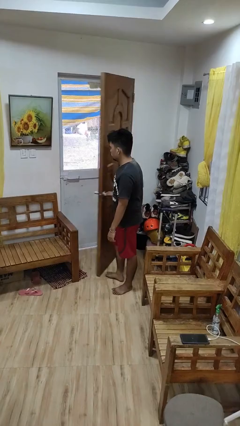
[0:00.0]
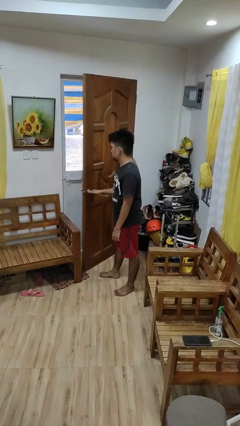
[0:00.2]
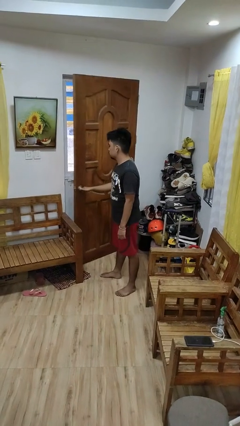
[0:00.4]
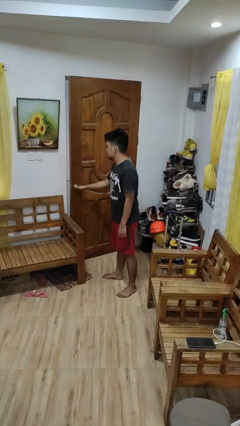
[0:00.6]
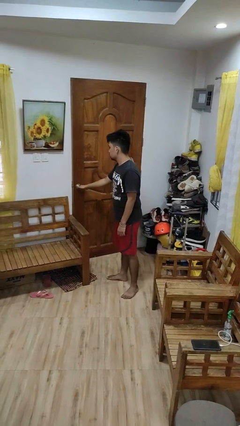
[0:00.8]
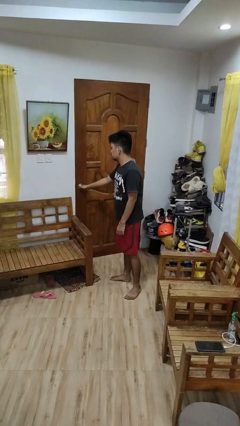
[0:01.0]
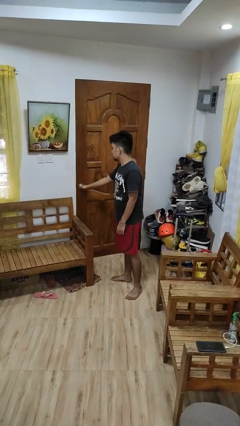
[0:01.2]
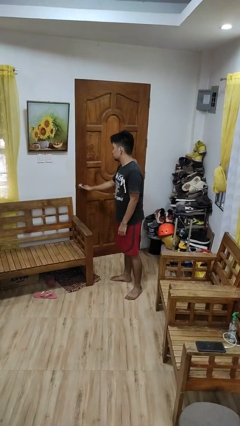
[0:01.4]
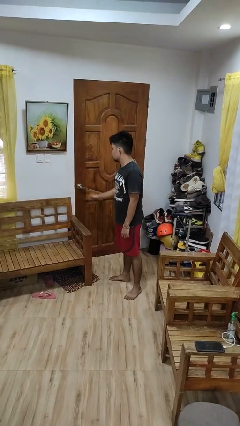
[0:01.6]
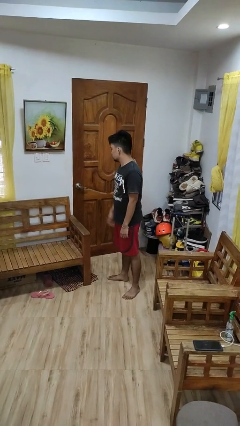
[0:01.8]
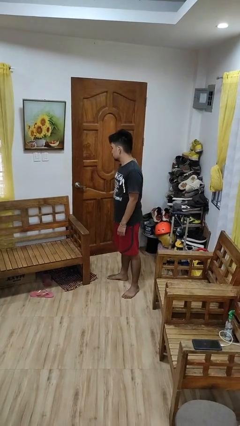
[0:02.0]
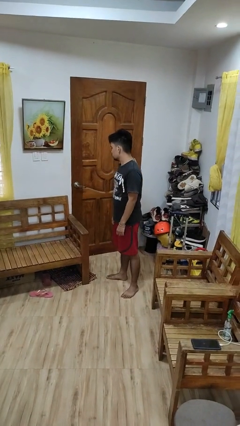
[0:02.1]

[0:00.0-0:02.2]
person closes facility door

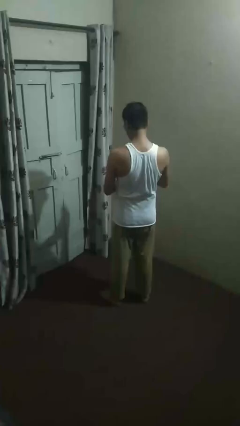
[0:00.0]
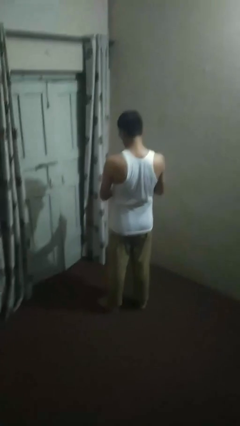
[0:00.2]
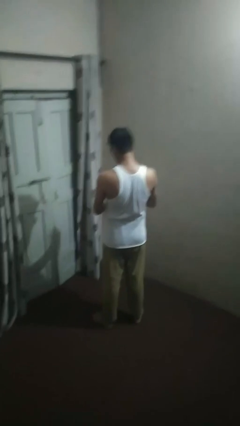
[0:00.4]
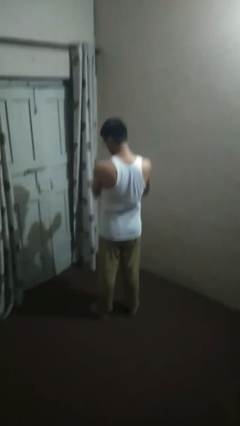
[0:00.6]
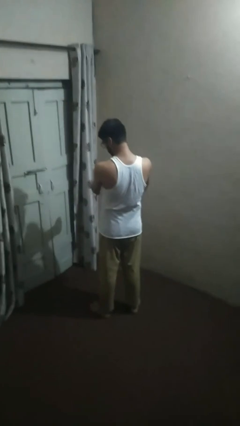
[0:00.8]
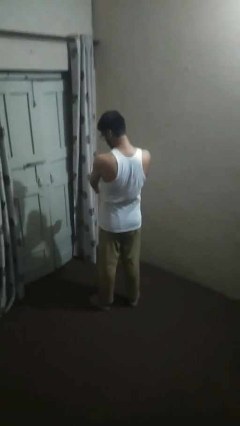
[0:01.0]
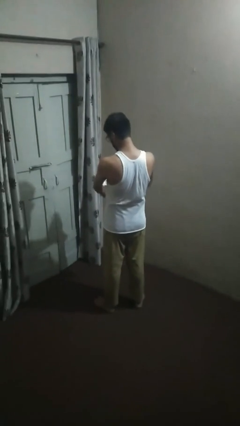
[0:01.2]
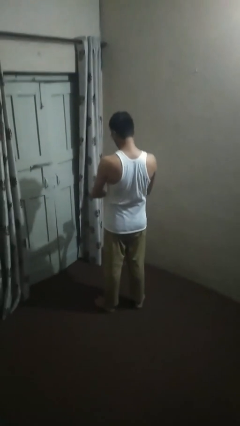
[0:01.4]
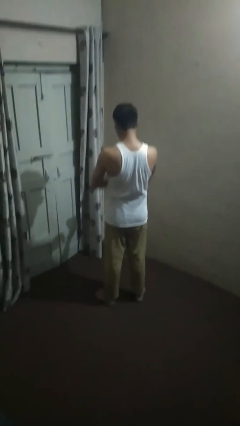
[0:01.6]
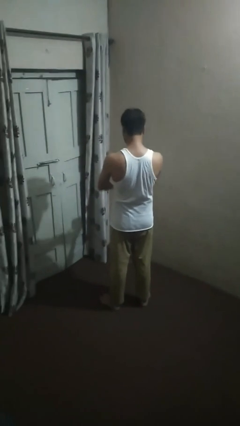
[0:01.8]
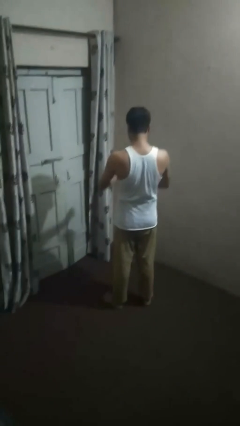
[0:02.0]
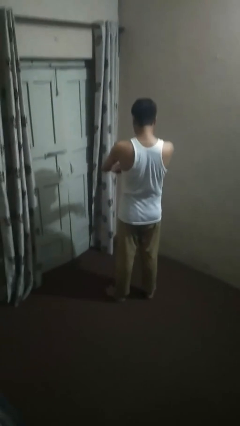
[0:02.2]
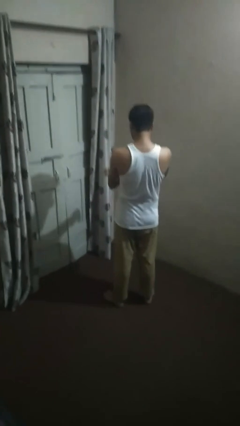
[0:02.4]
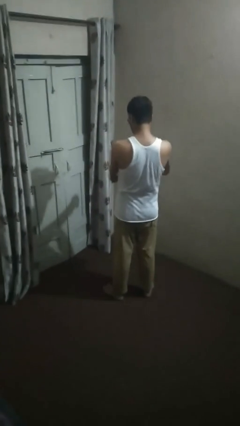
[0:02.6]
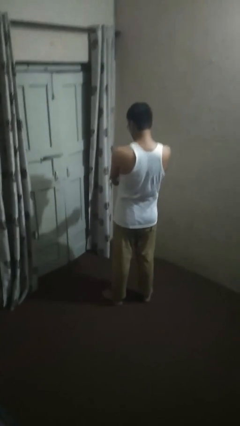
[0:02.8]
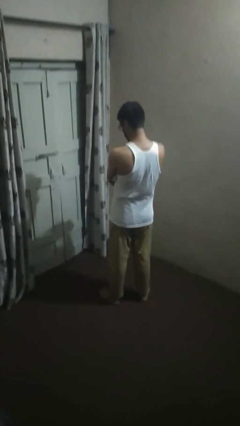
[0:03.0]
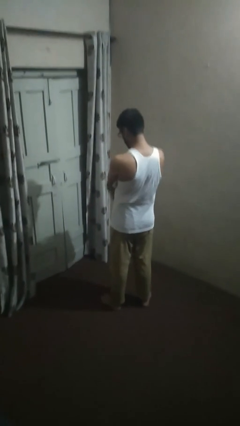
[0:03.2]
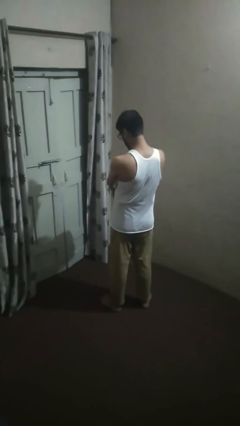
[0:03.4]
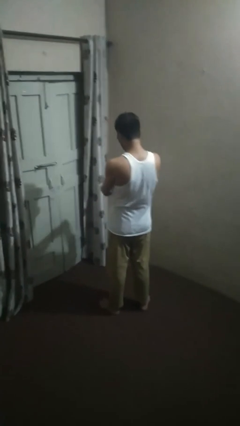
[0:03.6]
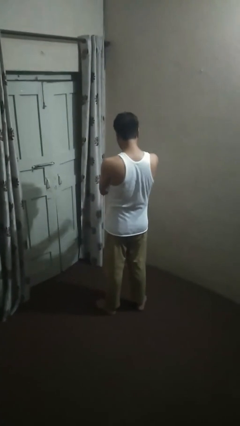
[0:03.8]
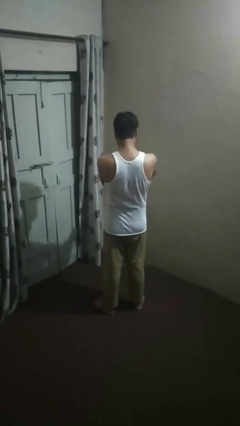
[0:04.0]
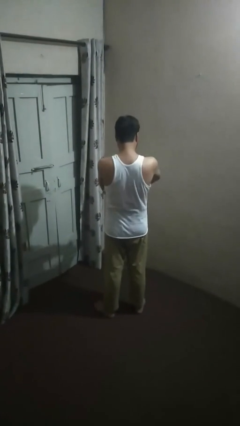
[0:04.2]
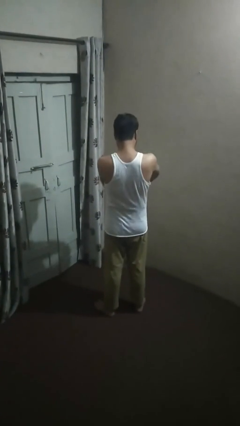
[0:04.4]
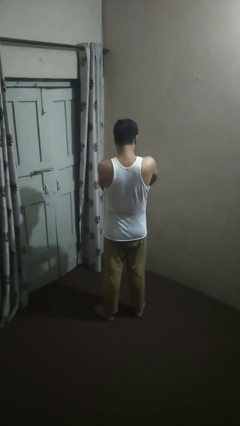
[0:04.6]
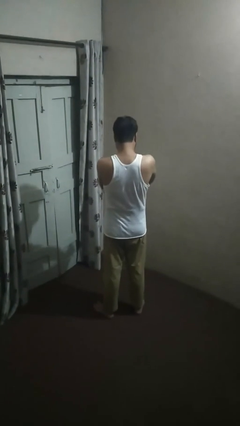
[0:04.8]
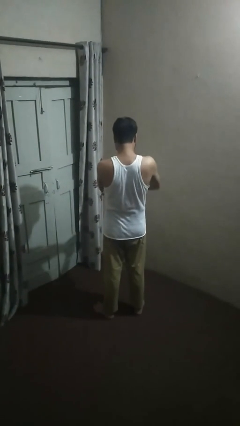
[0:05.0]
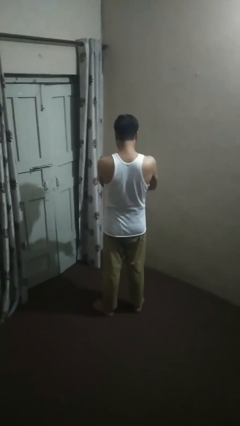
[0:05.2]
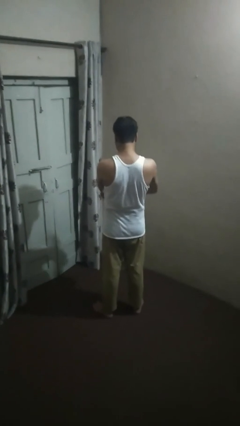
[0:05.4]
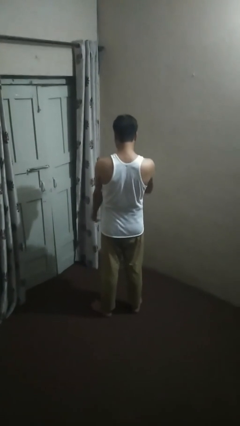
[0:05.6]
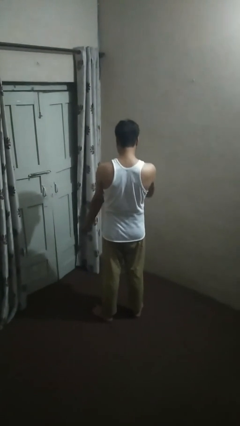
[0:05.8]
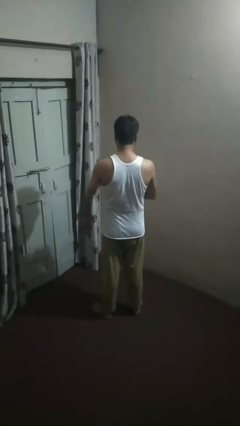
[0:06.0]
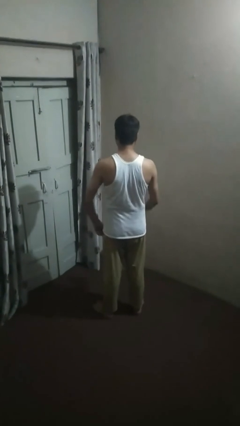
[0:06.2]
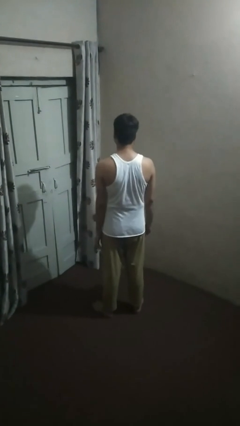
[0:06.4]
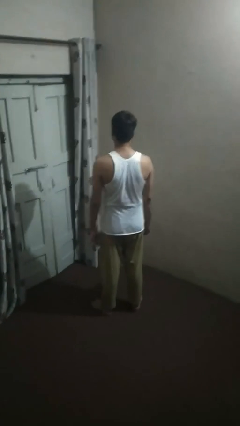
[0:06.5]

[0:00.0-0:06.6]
person applies sunscreen

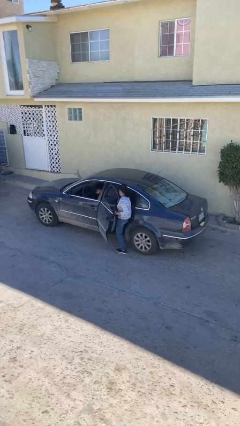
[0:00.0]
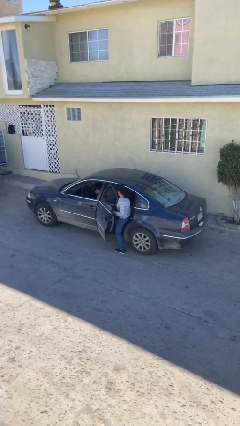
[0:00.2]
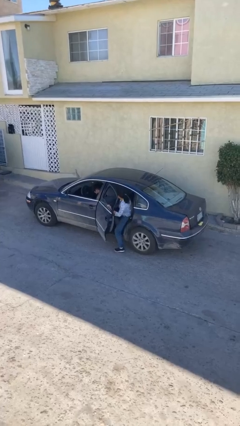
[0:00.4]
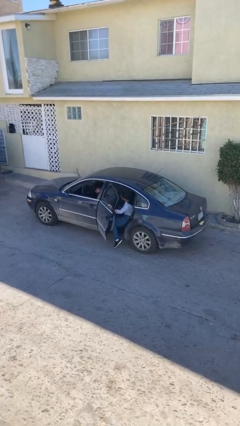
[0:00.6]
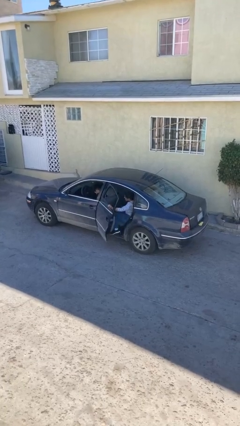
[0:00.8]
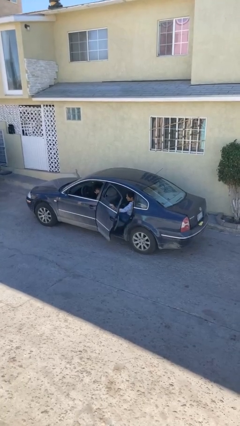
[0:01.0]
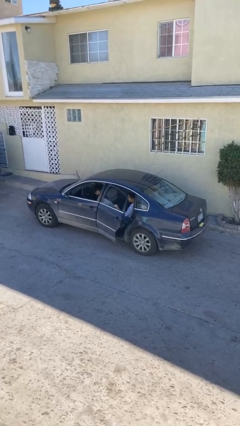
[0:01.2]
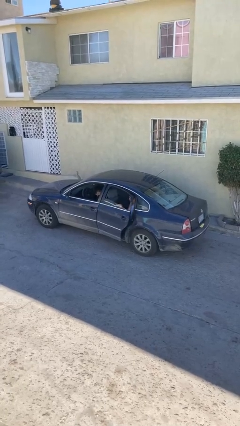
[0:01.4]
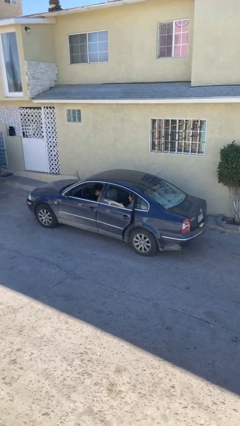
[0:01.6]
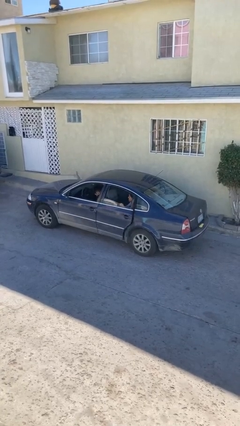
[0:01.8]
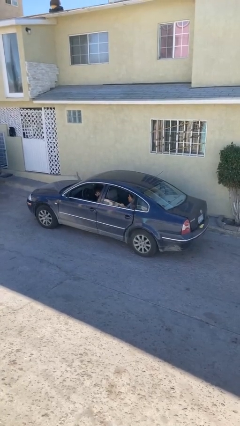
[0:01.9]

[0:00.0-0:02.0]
car picks up person

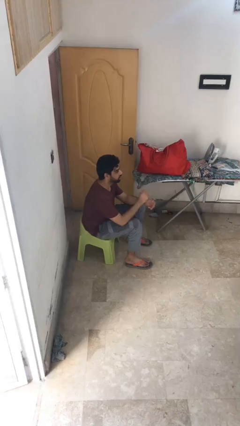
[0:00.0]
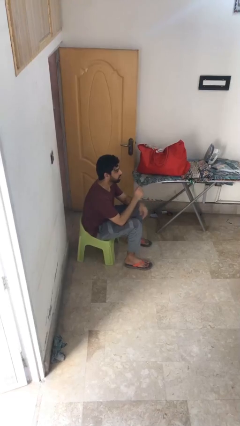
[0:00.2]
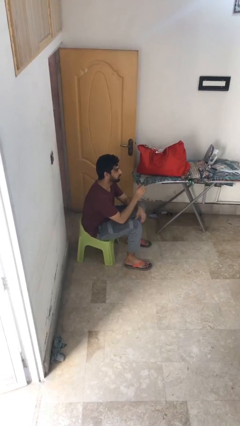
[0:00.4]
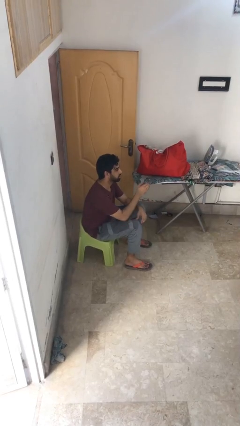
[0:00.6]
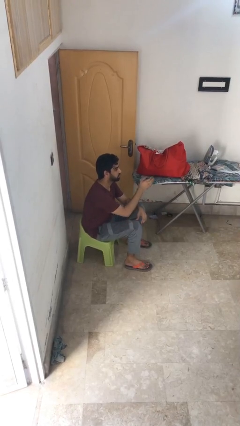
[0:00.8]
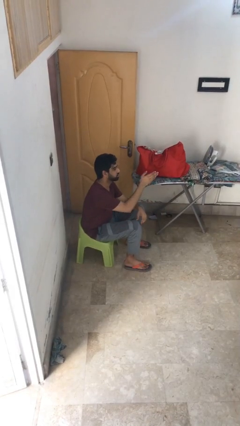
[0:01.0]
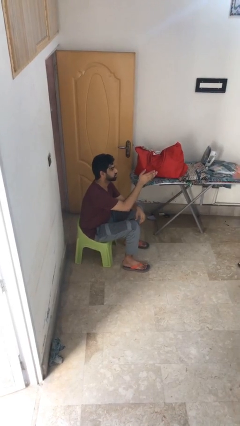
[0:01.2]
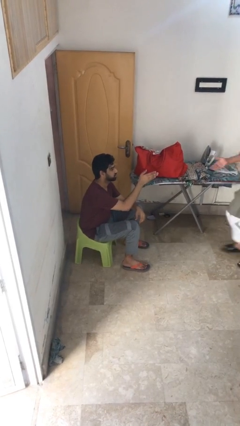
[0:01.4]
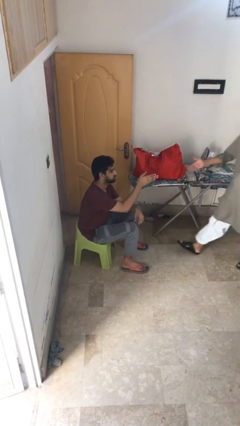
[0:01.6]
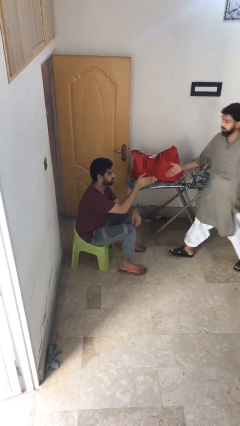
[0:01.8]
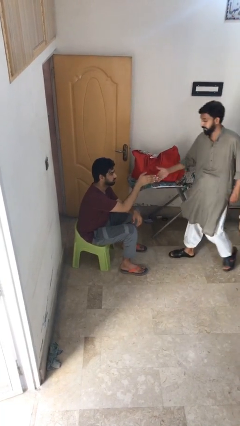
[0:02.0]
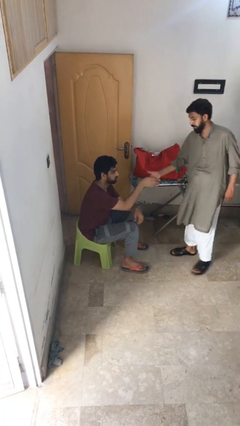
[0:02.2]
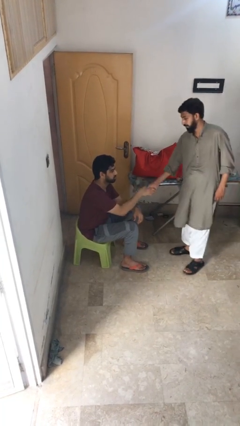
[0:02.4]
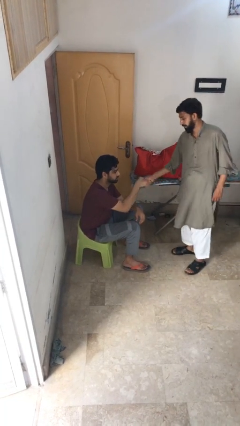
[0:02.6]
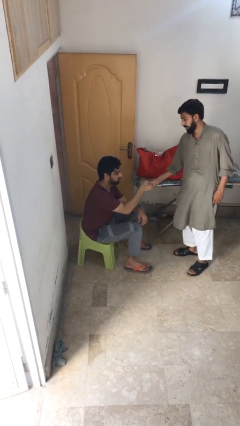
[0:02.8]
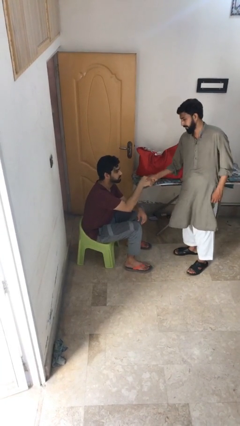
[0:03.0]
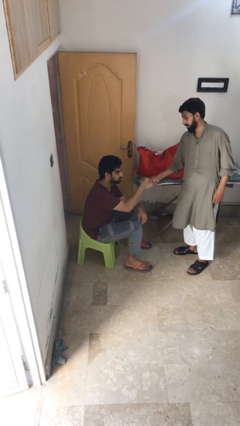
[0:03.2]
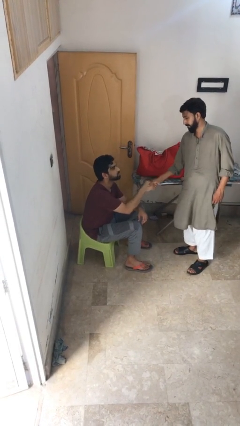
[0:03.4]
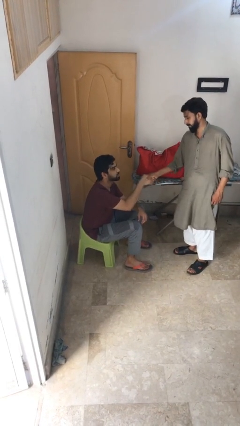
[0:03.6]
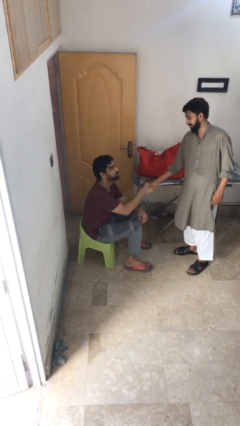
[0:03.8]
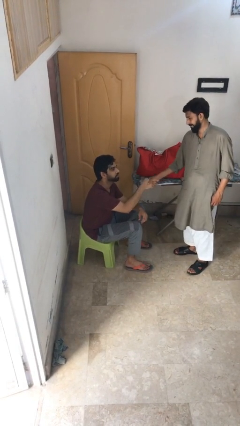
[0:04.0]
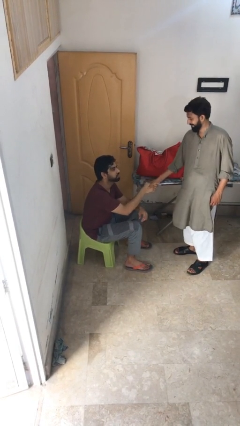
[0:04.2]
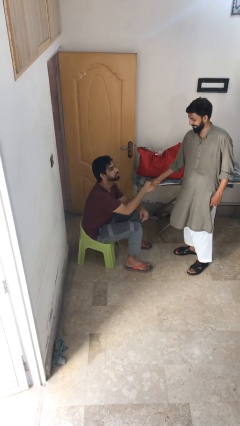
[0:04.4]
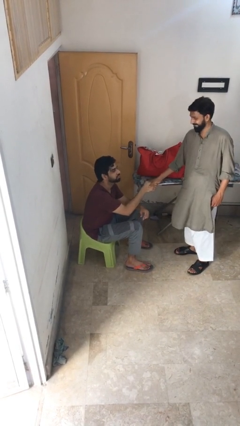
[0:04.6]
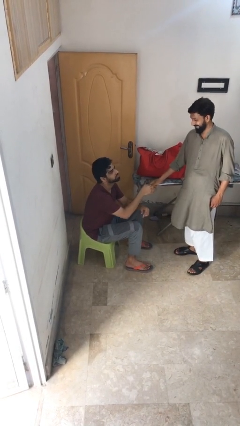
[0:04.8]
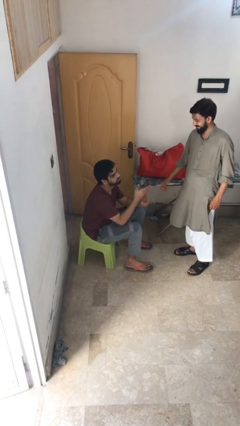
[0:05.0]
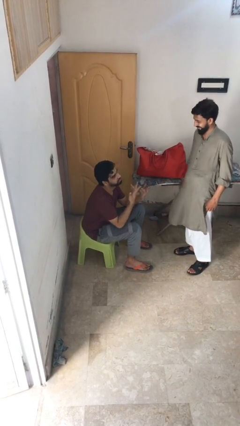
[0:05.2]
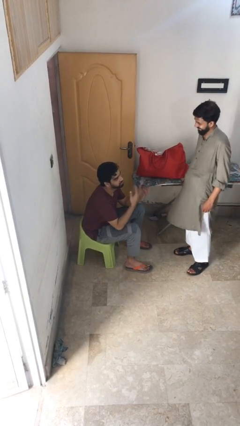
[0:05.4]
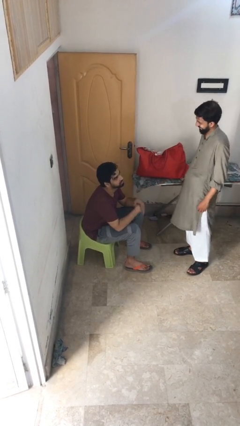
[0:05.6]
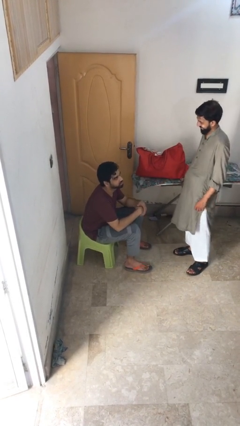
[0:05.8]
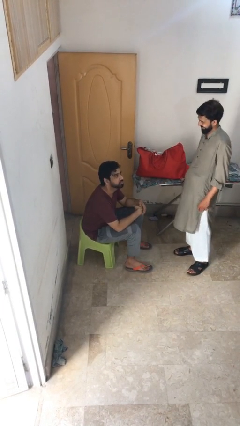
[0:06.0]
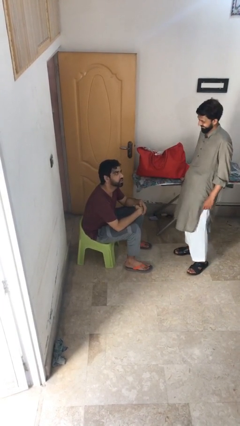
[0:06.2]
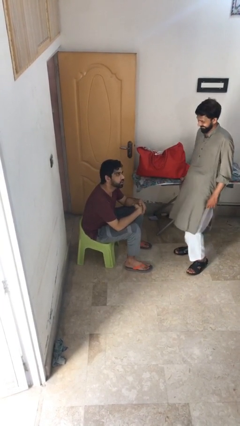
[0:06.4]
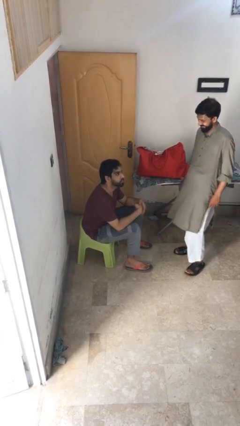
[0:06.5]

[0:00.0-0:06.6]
person shakes hand

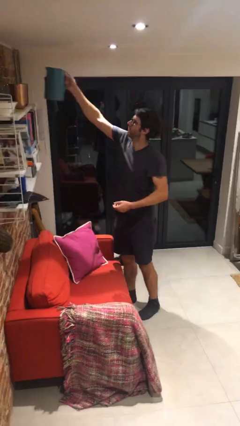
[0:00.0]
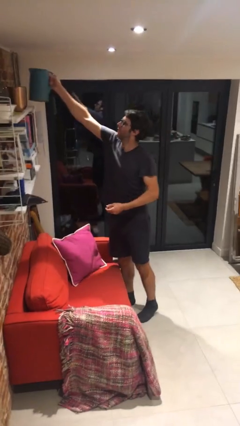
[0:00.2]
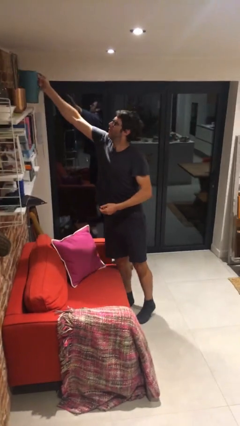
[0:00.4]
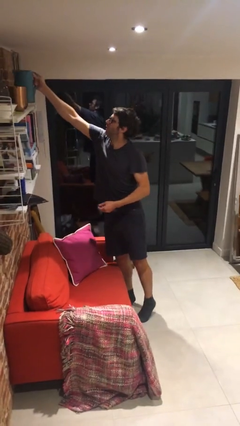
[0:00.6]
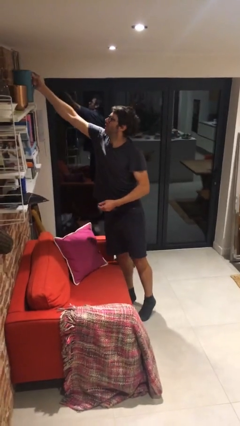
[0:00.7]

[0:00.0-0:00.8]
person puts down object on shelf
